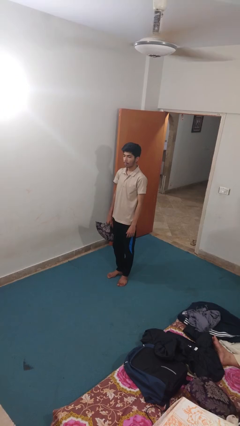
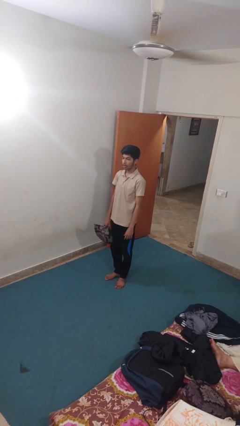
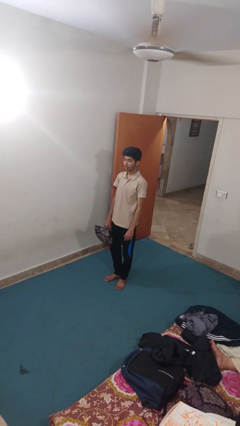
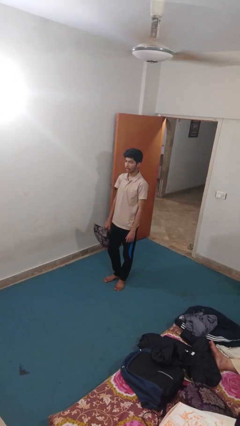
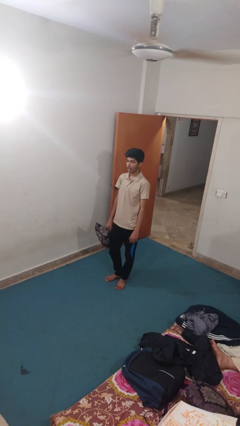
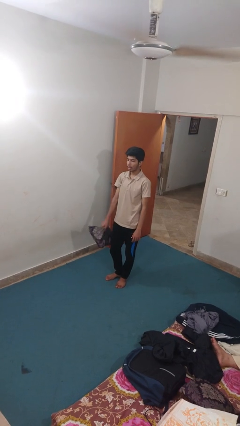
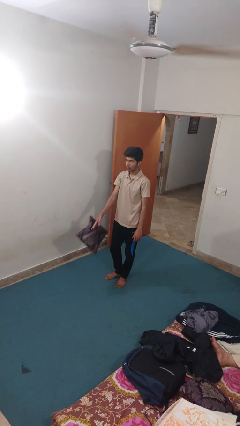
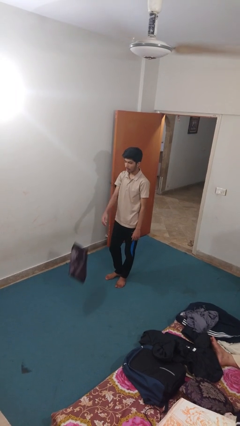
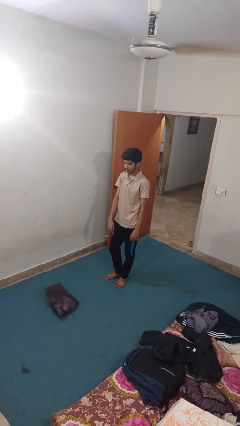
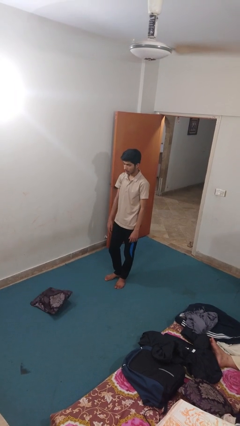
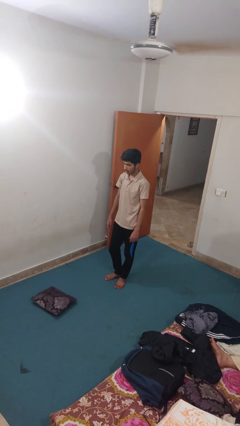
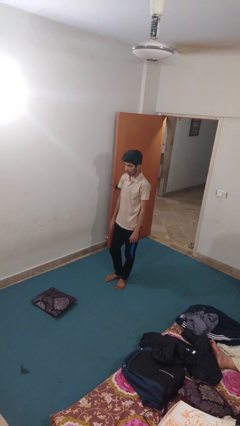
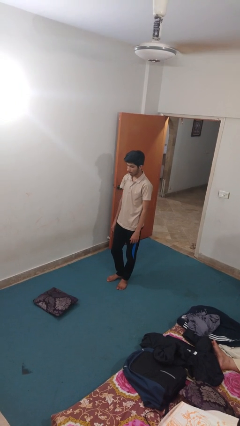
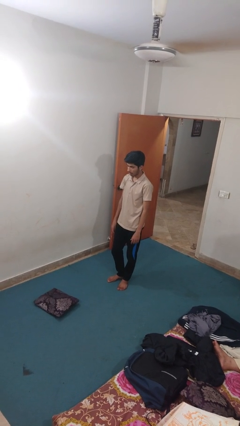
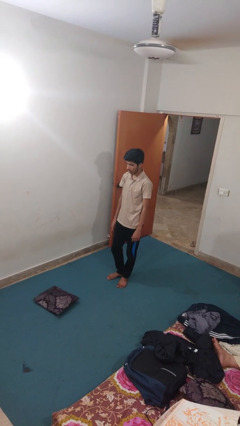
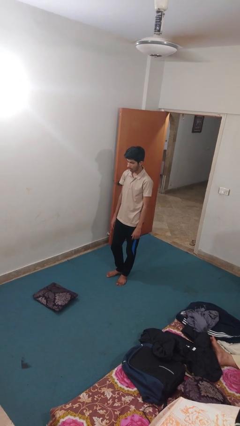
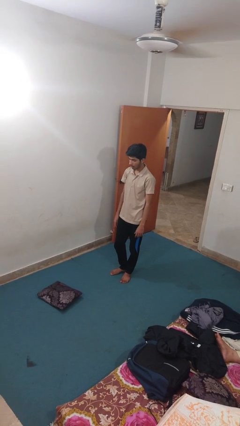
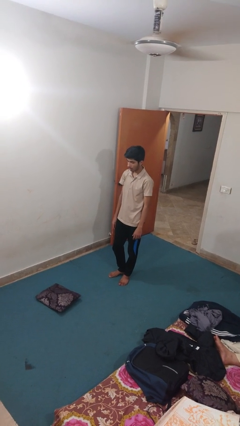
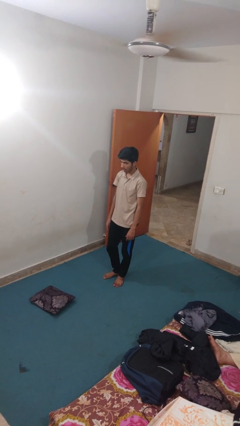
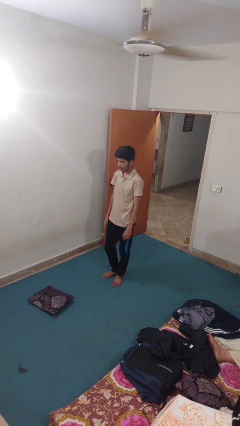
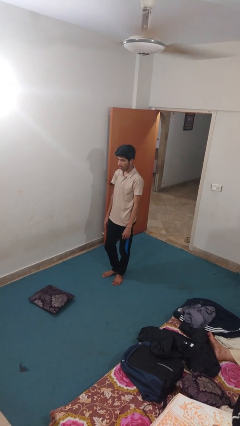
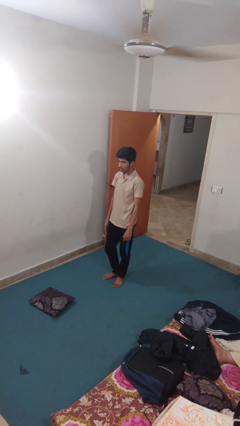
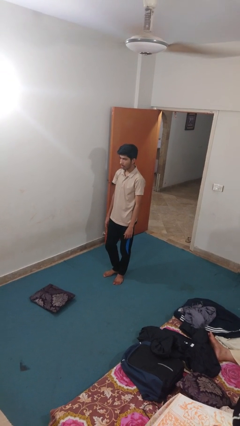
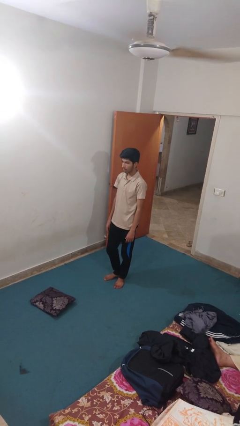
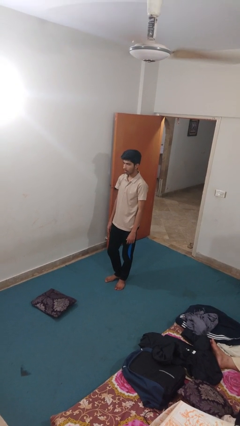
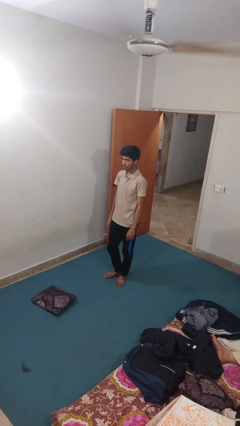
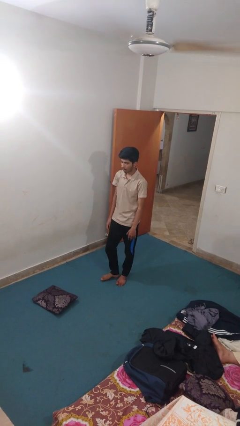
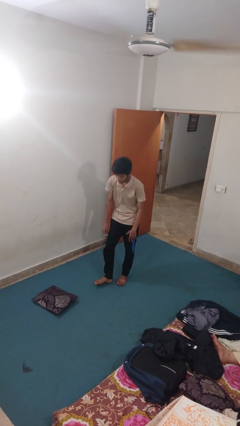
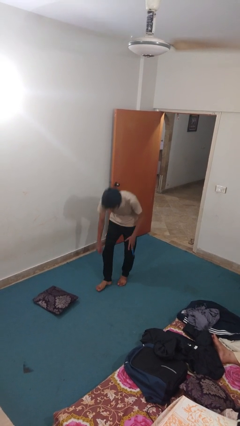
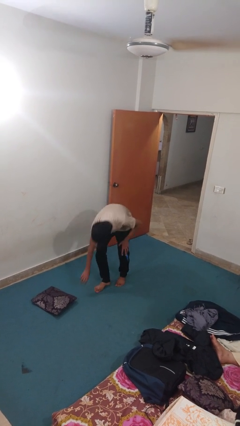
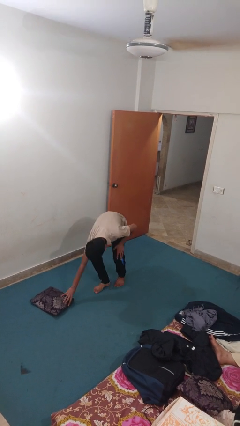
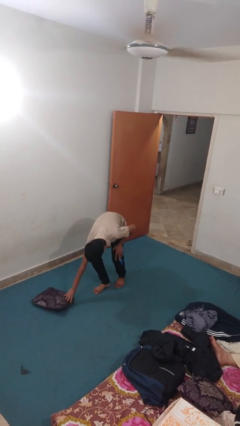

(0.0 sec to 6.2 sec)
person drops object

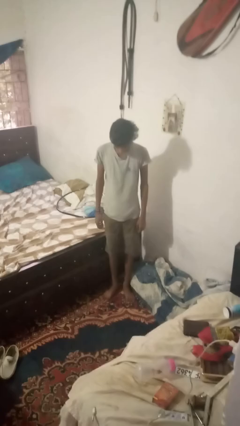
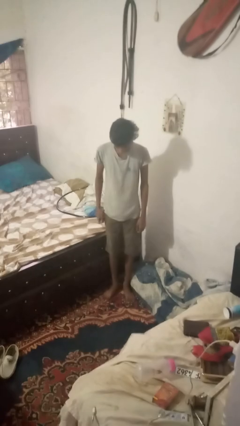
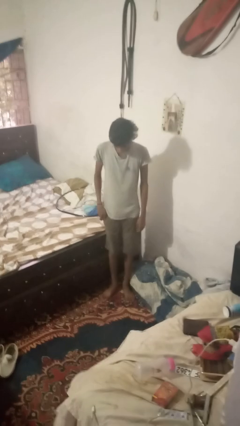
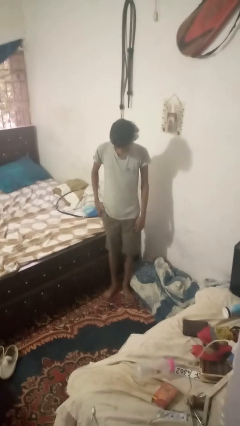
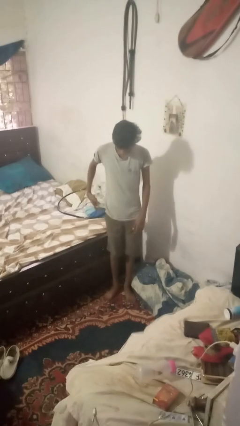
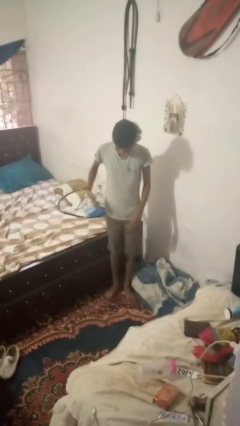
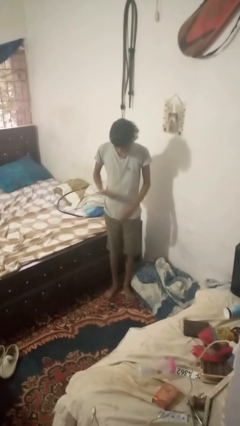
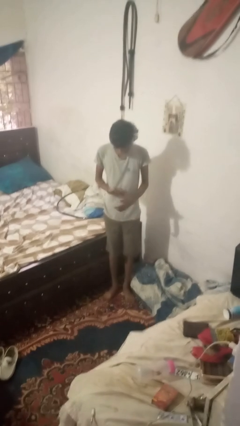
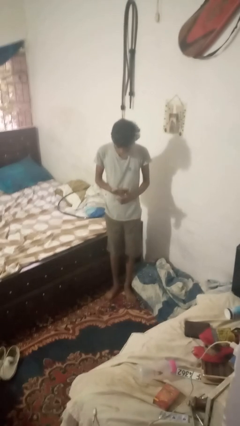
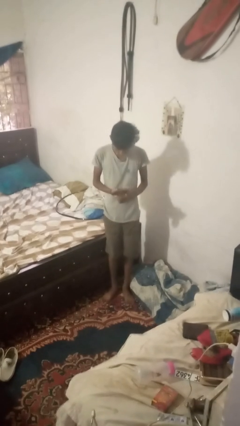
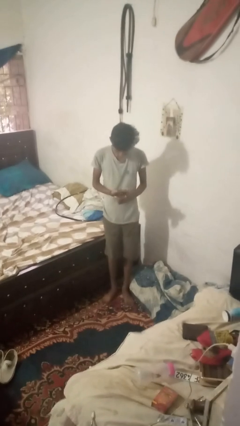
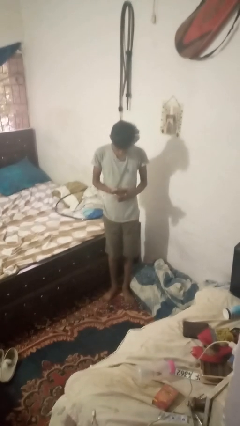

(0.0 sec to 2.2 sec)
person takes phone from pocket

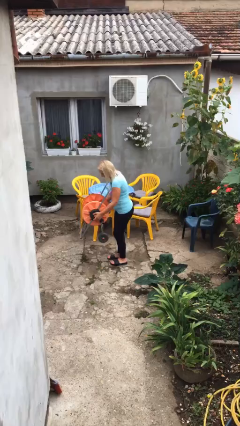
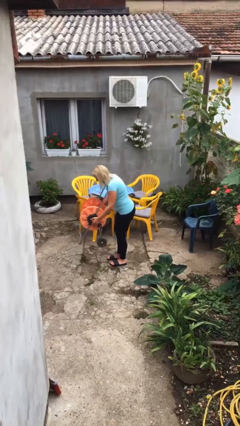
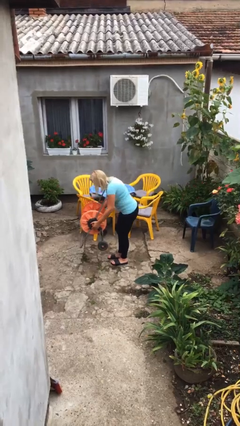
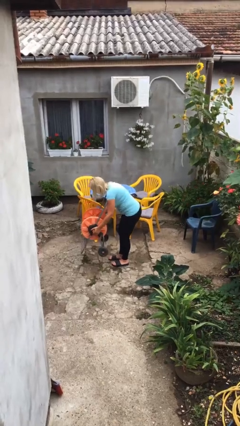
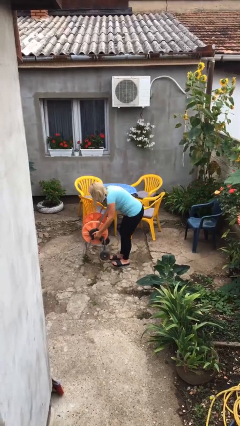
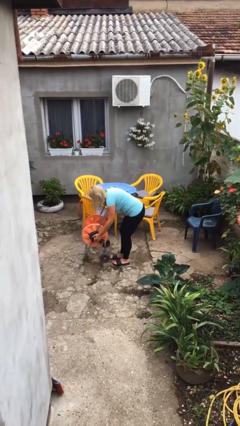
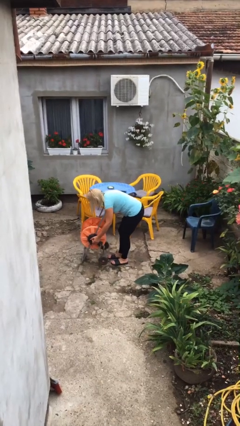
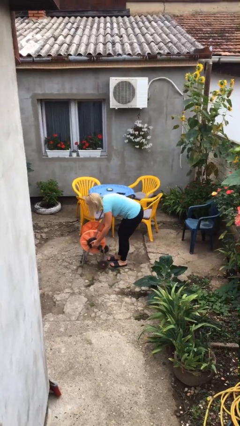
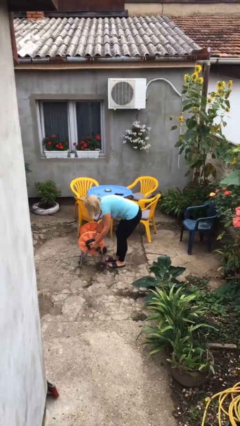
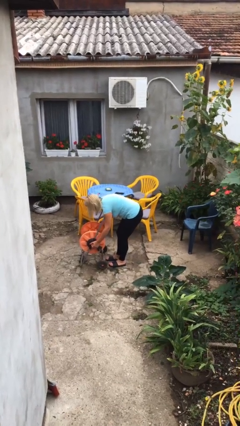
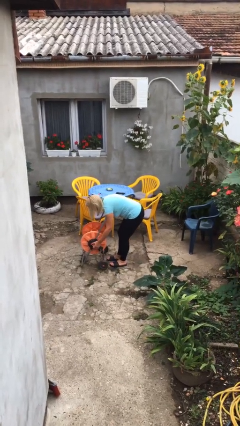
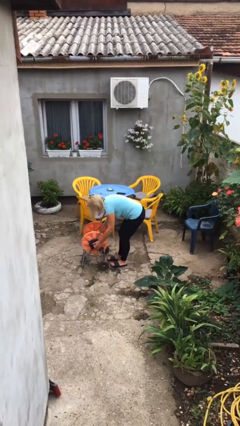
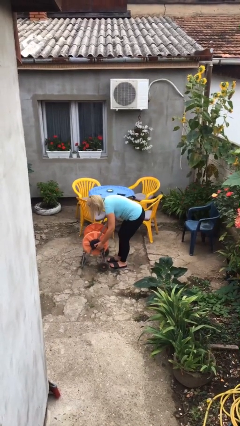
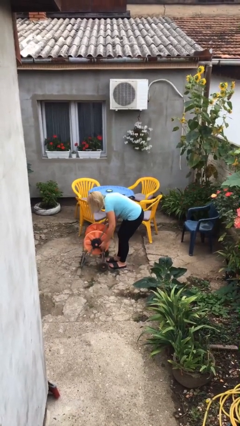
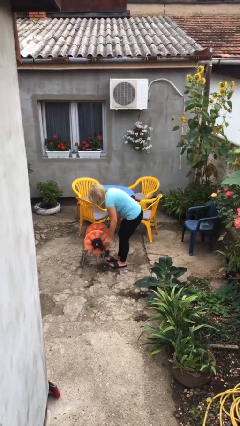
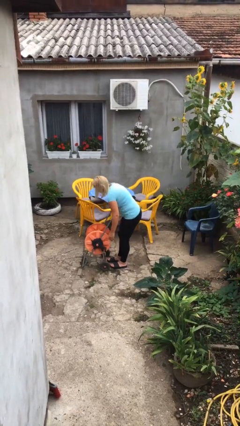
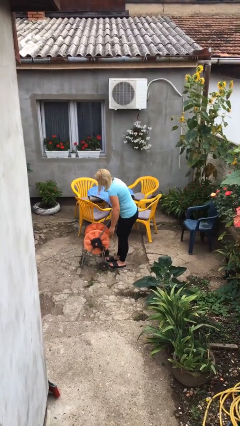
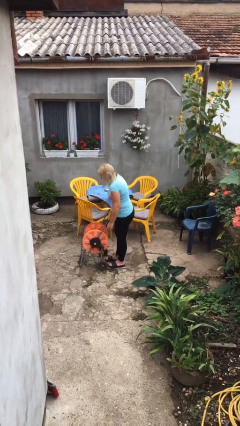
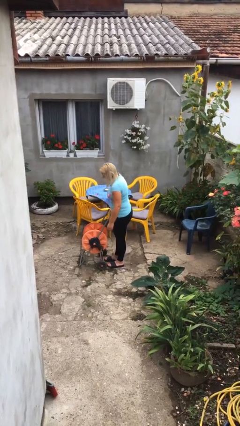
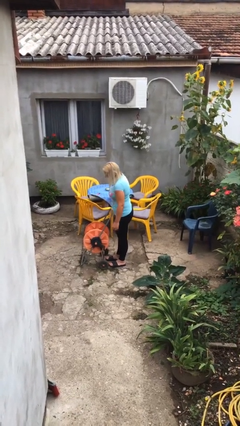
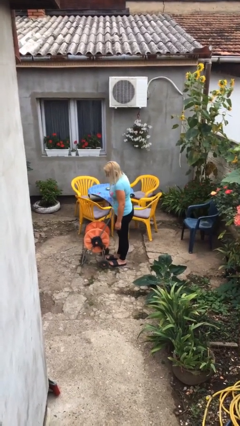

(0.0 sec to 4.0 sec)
person puts down object on floor

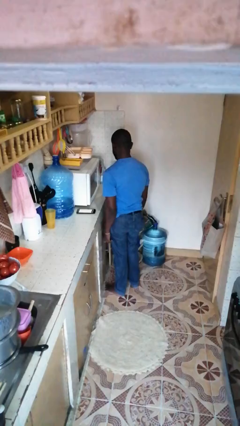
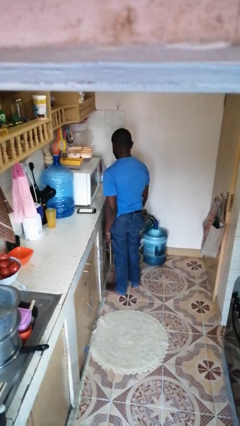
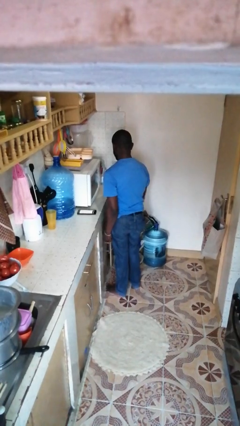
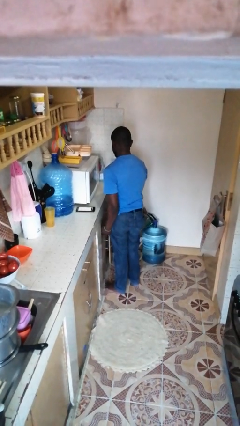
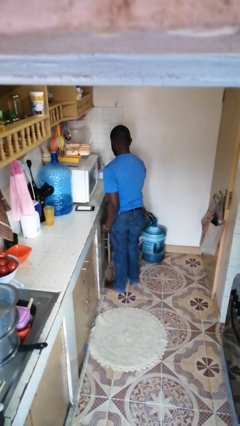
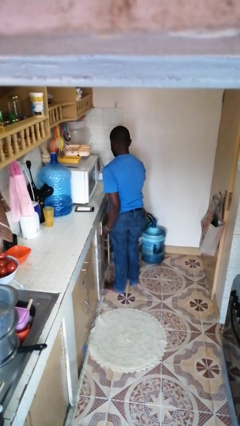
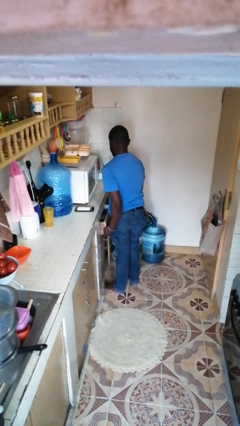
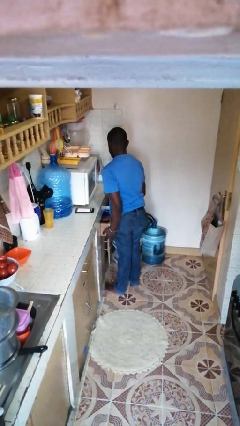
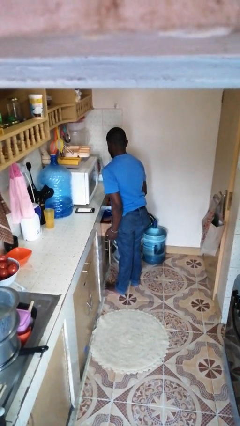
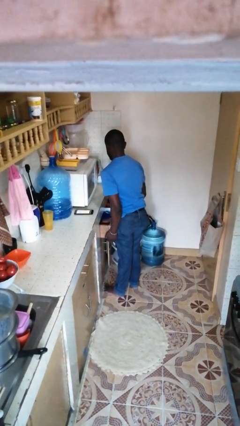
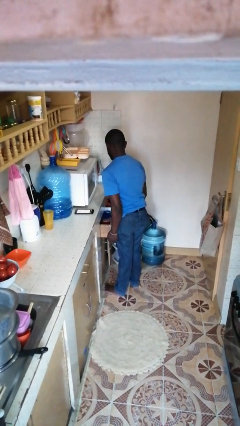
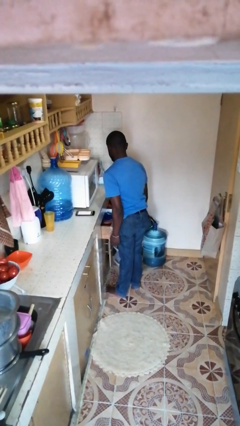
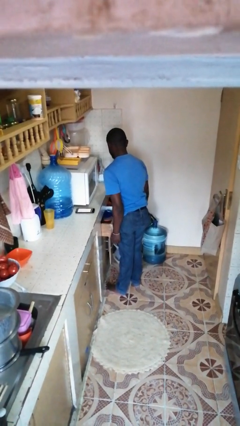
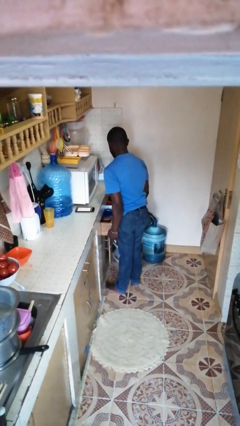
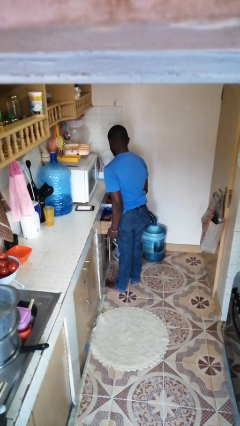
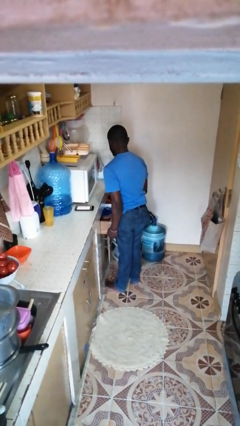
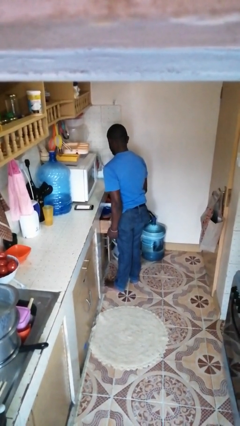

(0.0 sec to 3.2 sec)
person opens kitchen drawer

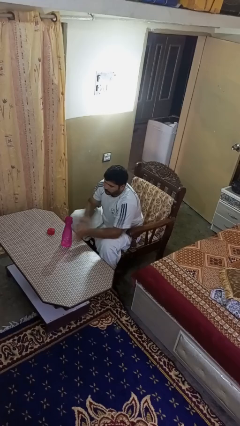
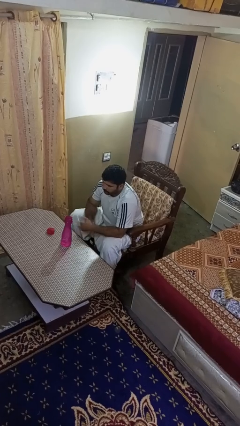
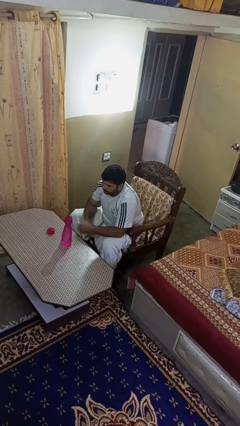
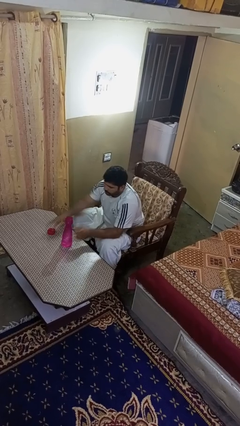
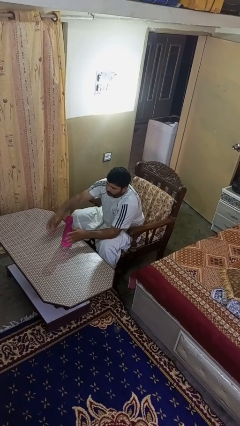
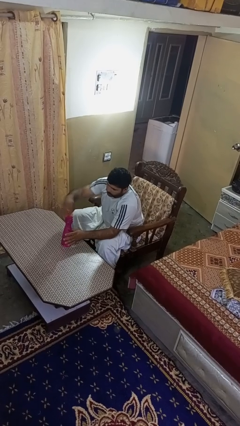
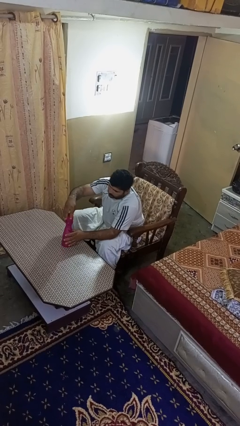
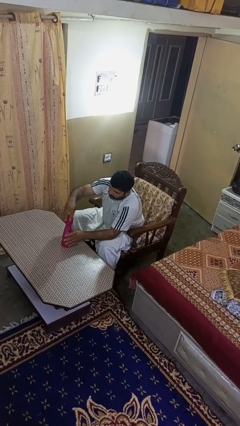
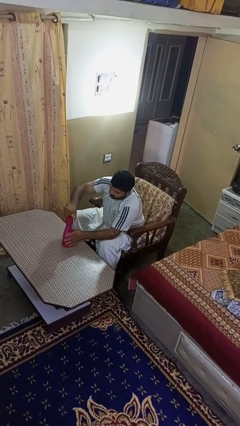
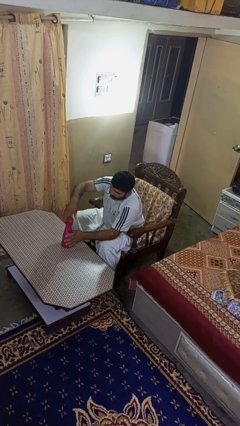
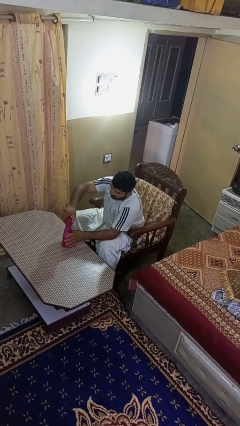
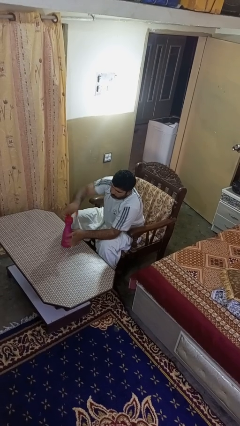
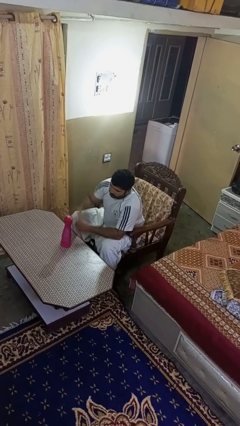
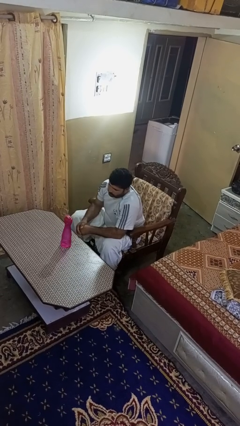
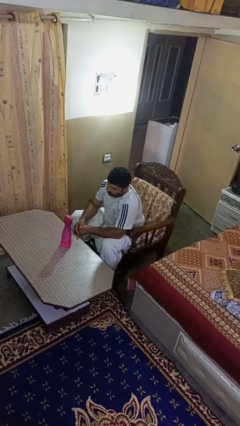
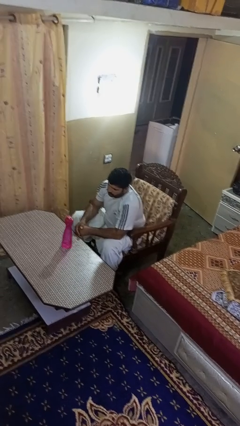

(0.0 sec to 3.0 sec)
person screws lid to bottle
